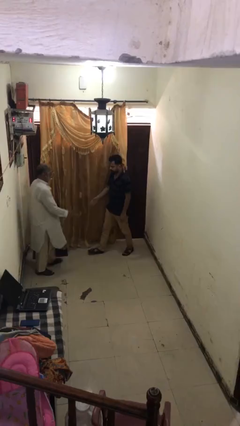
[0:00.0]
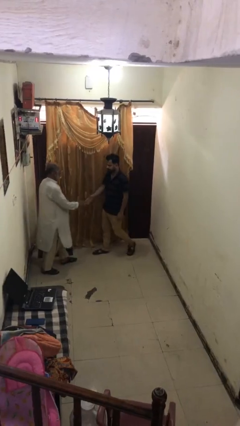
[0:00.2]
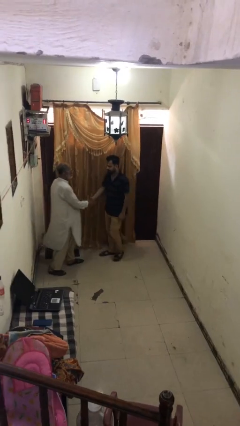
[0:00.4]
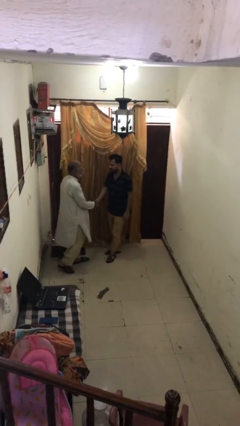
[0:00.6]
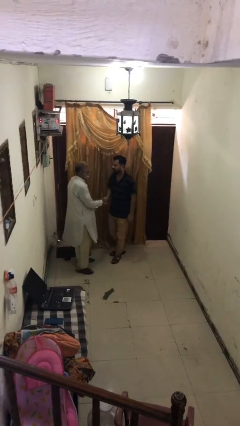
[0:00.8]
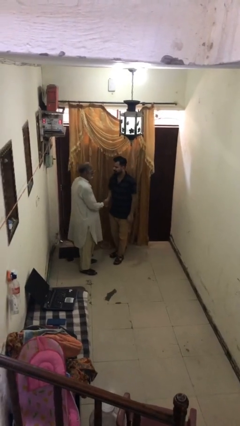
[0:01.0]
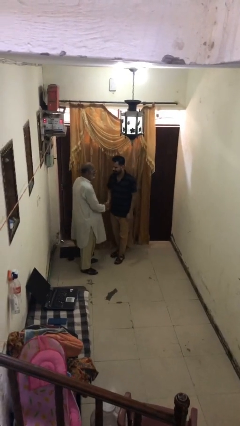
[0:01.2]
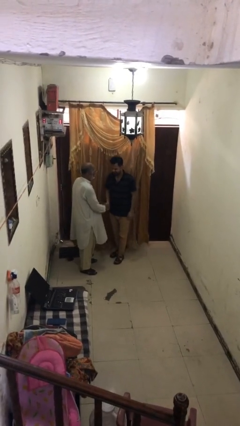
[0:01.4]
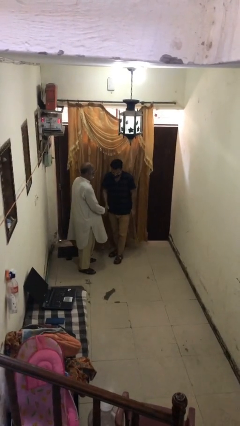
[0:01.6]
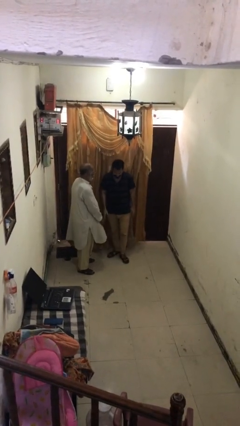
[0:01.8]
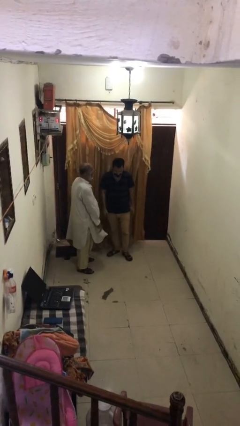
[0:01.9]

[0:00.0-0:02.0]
person shakes hand

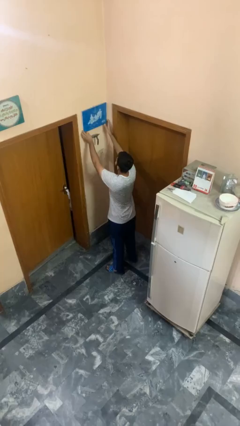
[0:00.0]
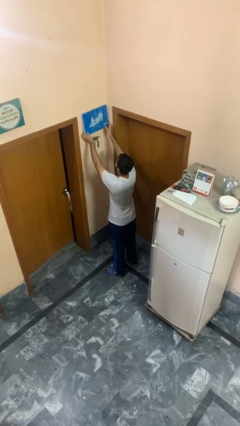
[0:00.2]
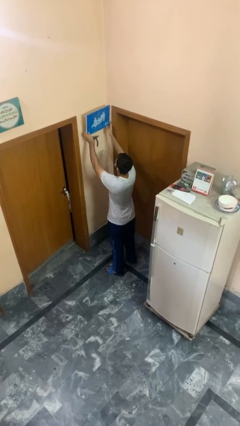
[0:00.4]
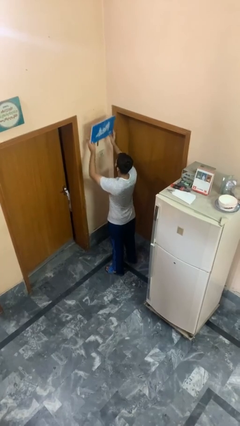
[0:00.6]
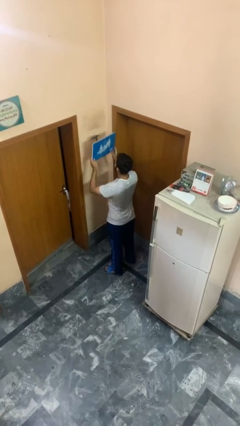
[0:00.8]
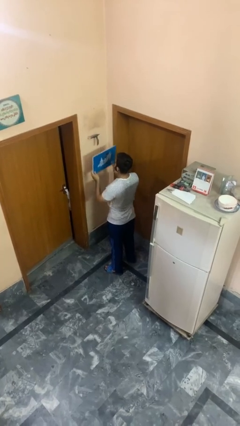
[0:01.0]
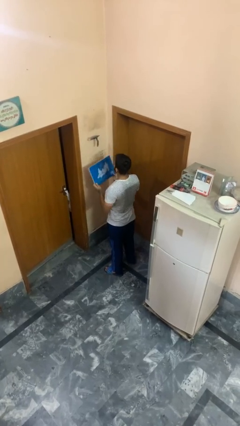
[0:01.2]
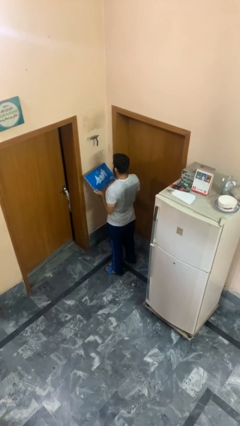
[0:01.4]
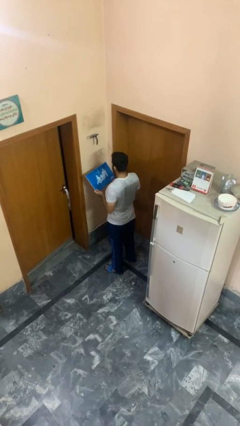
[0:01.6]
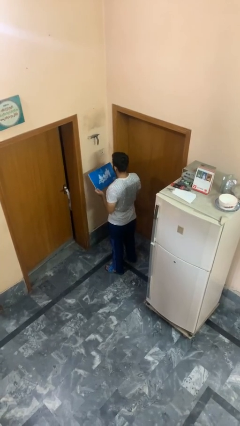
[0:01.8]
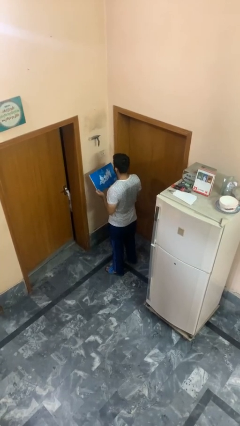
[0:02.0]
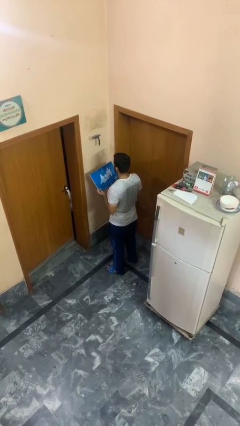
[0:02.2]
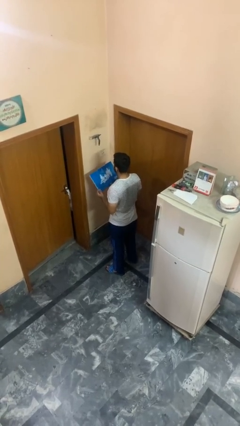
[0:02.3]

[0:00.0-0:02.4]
person takes down picture frame

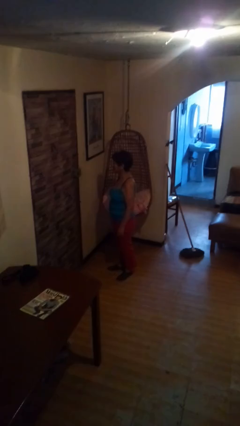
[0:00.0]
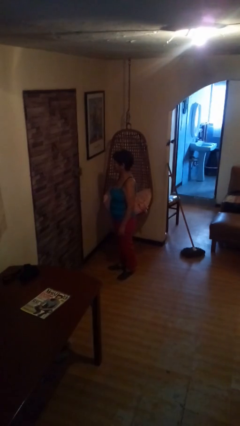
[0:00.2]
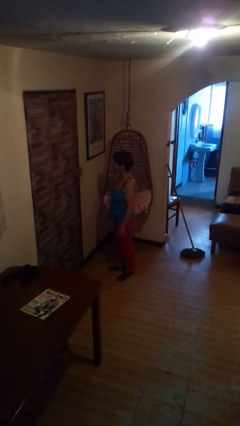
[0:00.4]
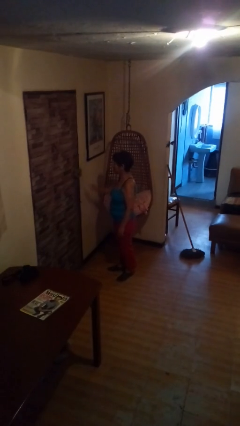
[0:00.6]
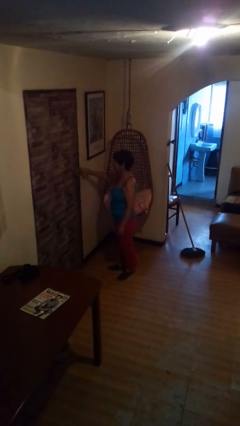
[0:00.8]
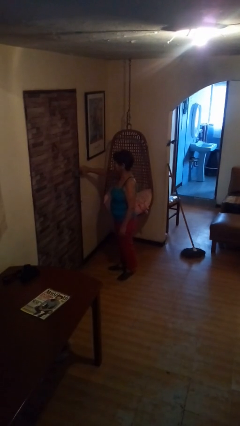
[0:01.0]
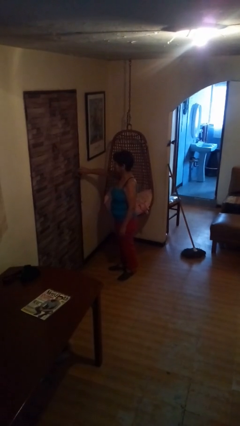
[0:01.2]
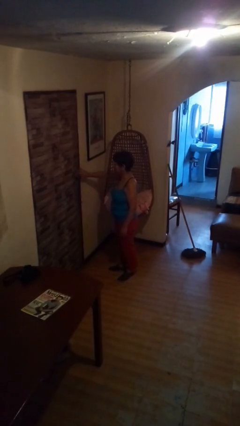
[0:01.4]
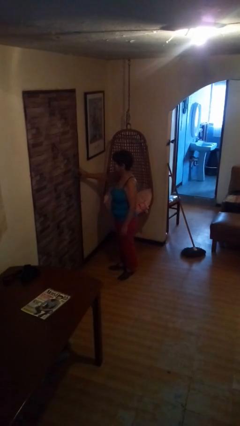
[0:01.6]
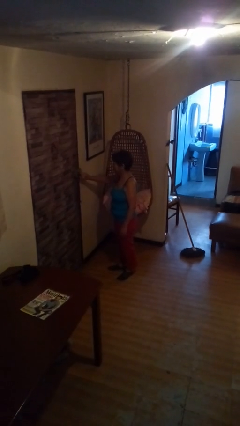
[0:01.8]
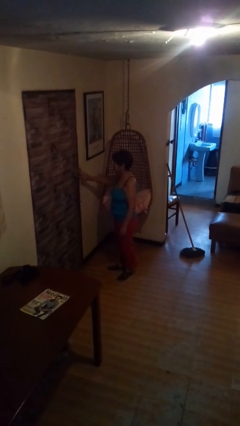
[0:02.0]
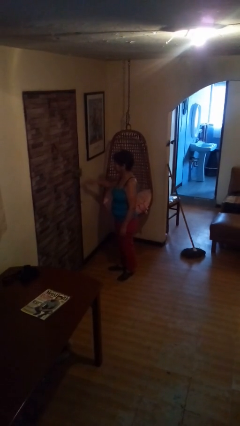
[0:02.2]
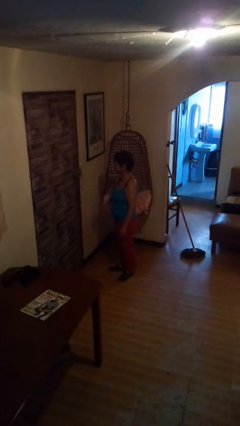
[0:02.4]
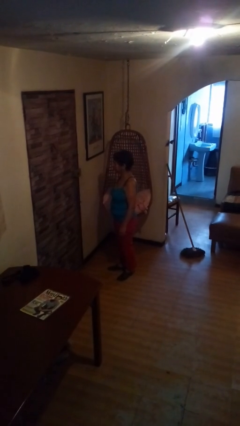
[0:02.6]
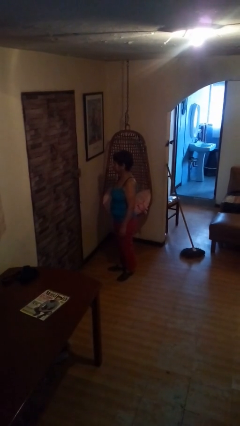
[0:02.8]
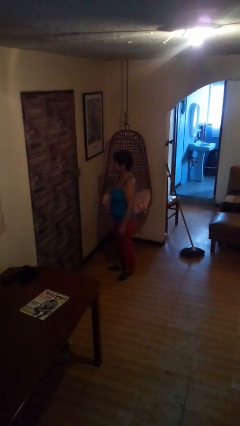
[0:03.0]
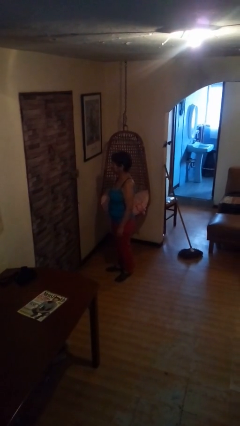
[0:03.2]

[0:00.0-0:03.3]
person taps object with finger

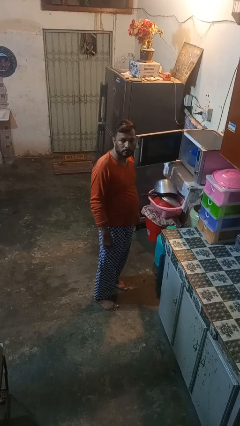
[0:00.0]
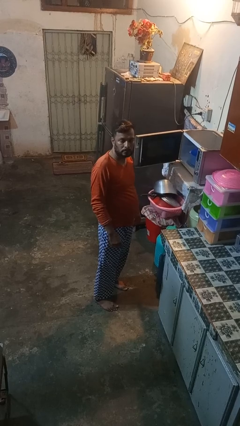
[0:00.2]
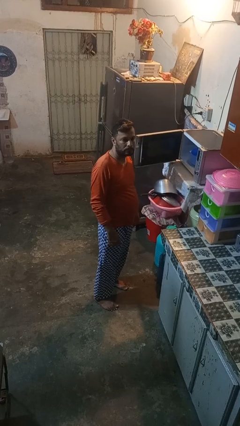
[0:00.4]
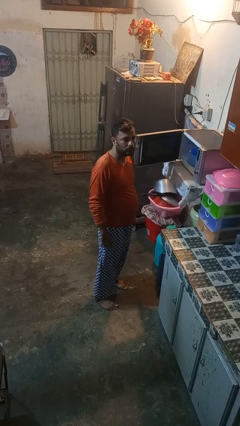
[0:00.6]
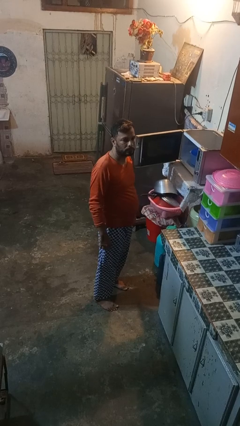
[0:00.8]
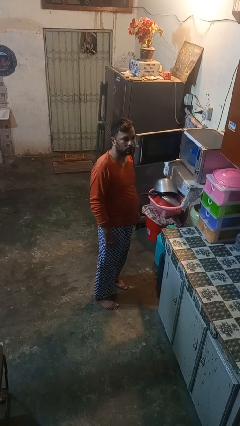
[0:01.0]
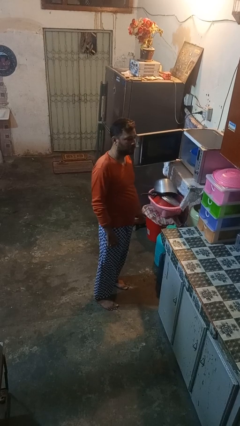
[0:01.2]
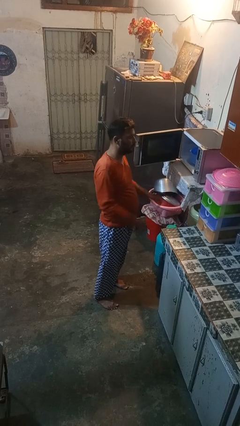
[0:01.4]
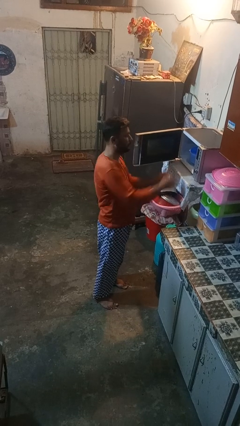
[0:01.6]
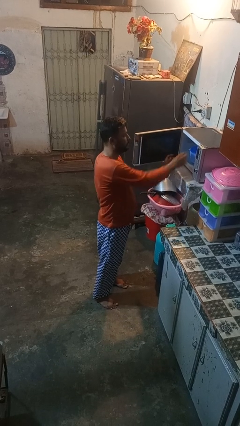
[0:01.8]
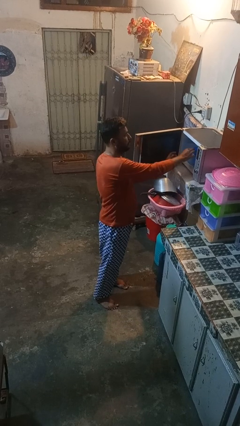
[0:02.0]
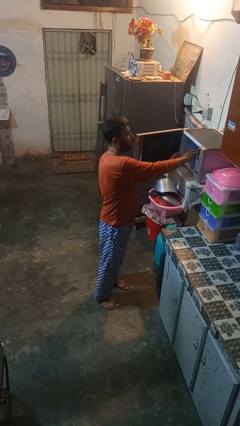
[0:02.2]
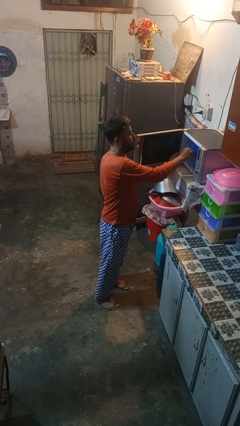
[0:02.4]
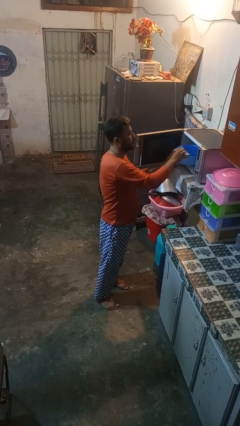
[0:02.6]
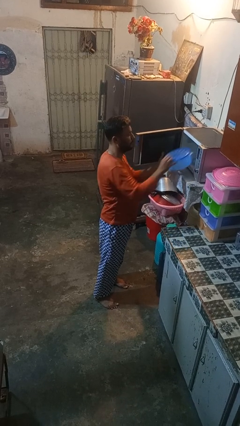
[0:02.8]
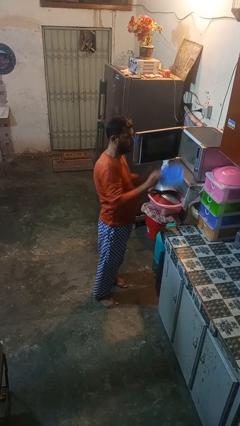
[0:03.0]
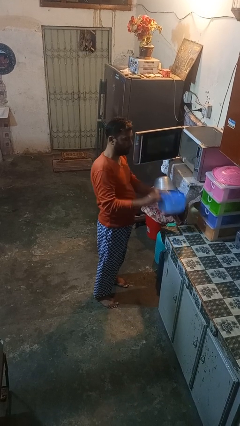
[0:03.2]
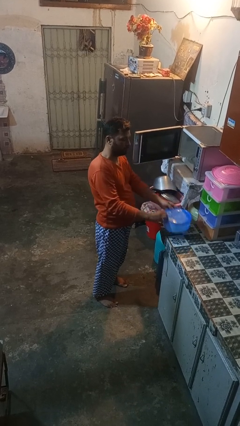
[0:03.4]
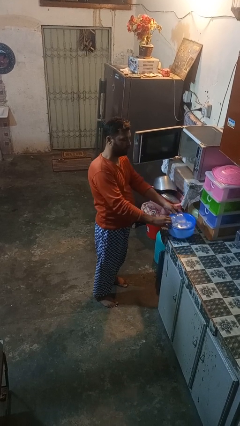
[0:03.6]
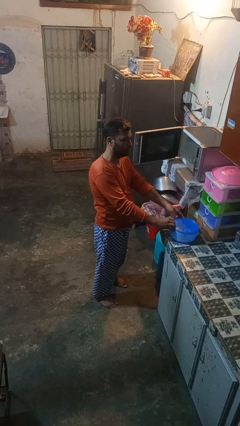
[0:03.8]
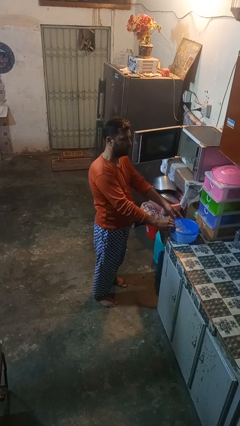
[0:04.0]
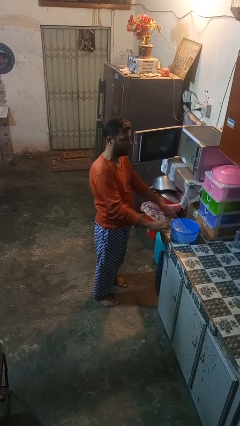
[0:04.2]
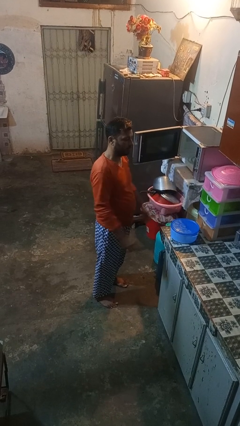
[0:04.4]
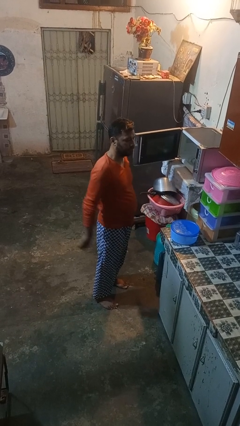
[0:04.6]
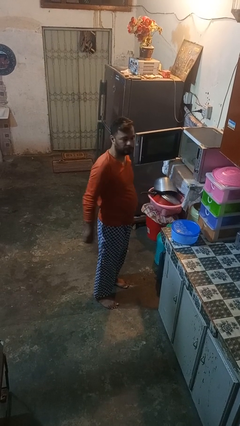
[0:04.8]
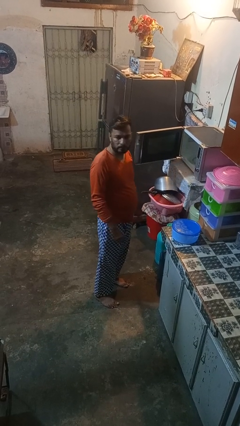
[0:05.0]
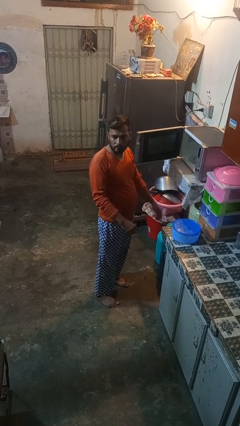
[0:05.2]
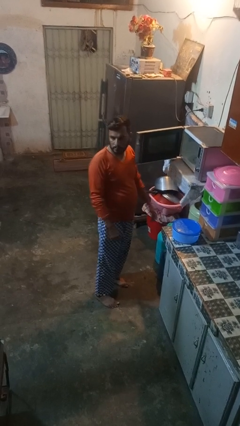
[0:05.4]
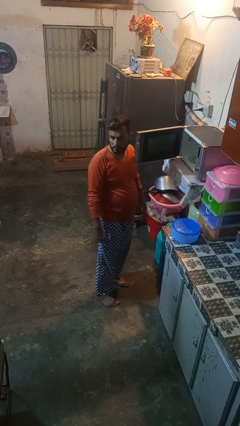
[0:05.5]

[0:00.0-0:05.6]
person takes object from microwave

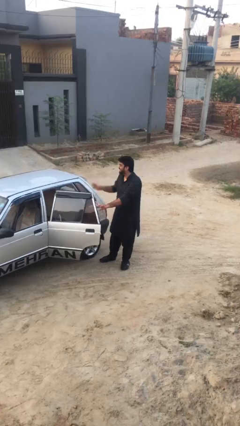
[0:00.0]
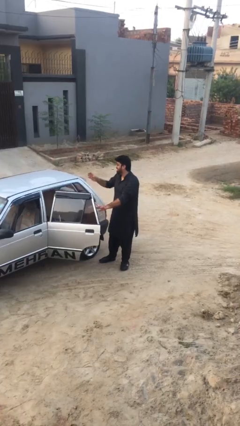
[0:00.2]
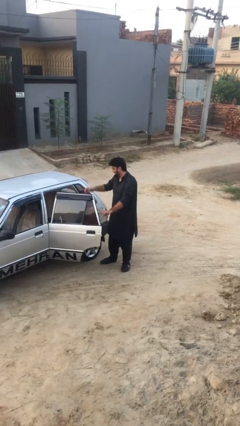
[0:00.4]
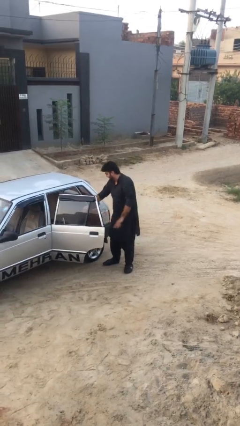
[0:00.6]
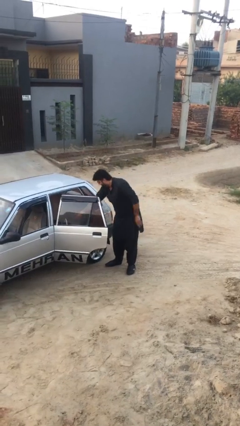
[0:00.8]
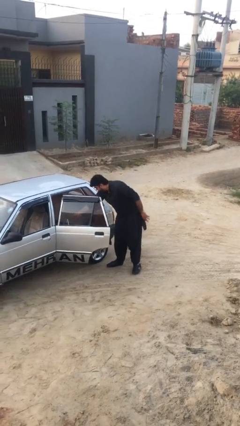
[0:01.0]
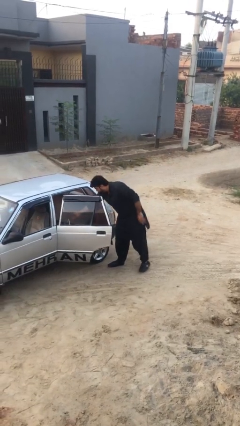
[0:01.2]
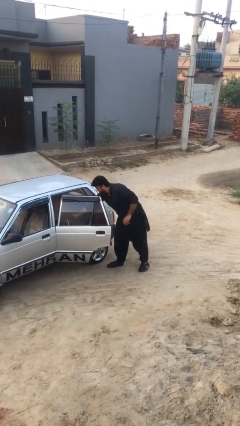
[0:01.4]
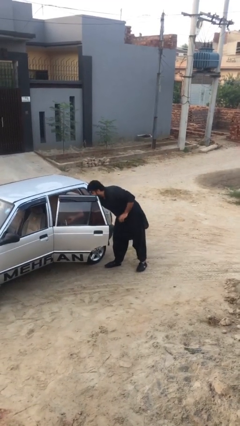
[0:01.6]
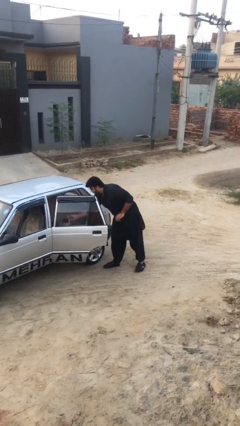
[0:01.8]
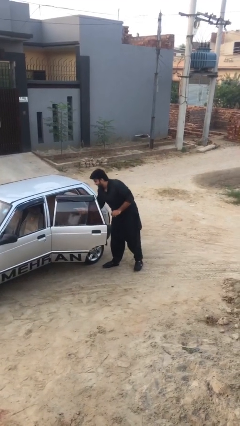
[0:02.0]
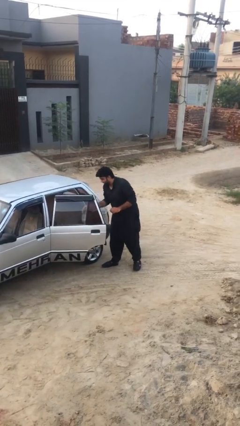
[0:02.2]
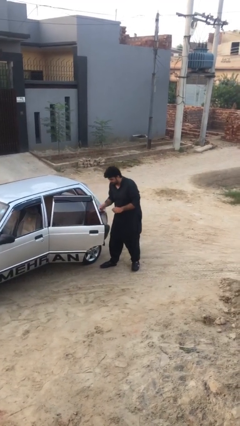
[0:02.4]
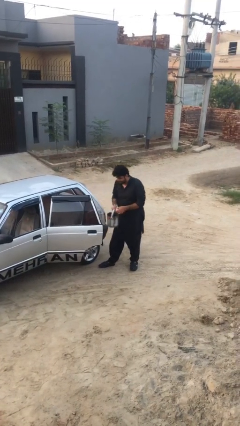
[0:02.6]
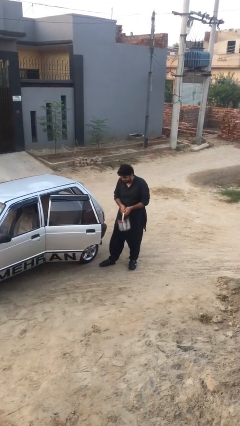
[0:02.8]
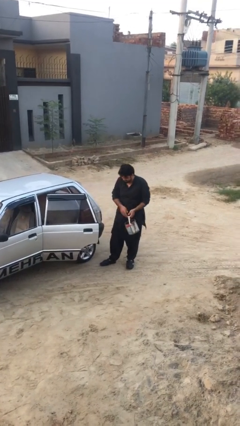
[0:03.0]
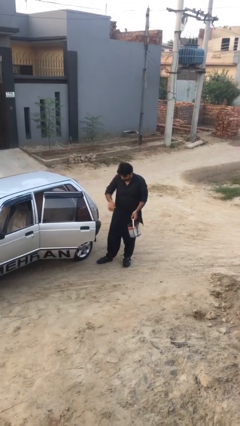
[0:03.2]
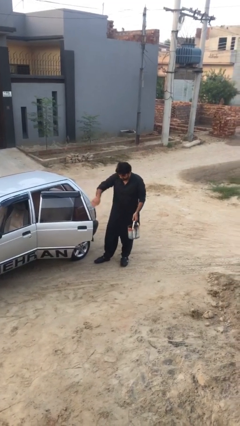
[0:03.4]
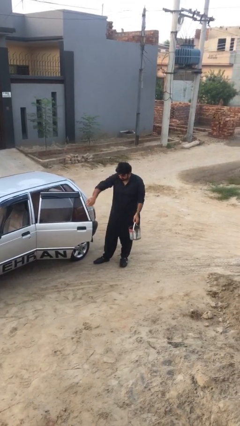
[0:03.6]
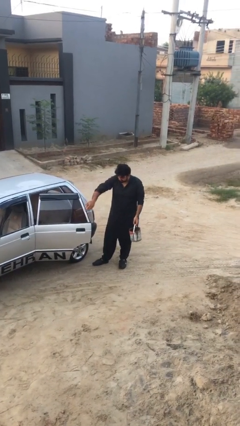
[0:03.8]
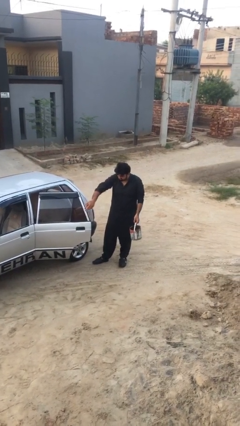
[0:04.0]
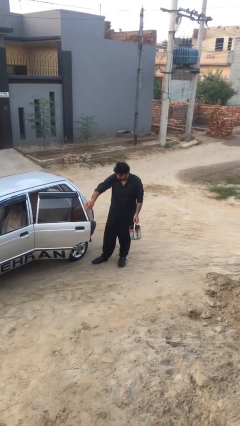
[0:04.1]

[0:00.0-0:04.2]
person unloads car
